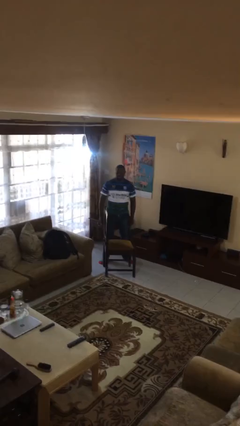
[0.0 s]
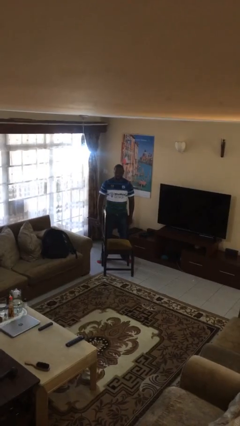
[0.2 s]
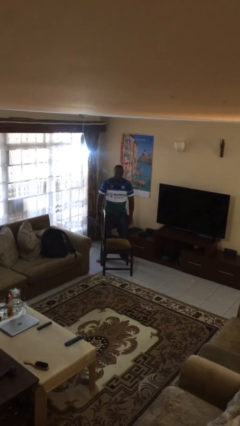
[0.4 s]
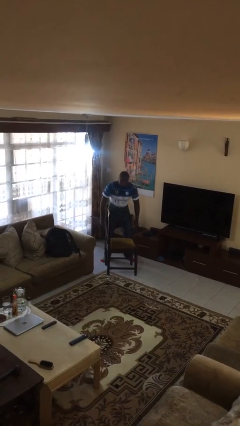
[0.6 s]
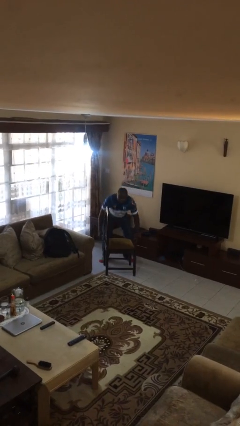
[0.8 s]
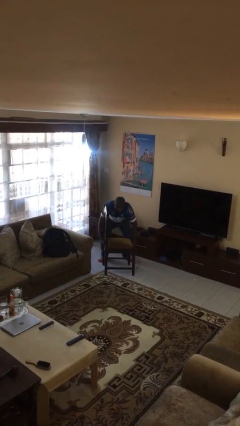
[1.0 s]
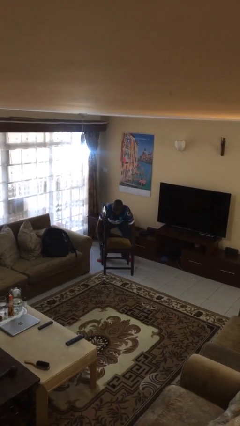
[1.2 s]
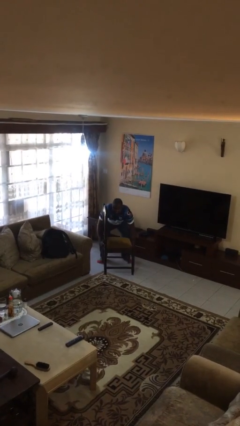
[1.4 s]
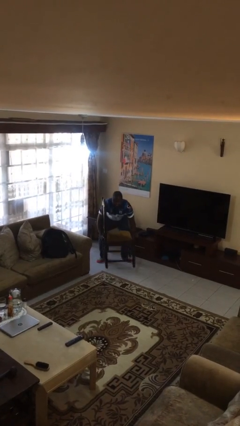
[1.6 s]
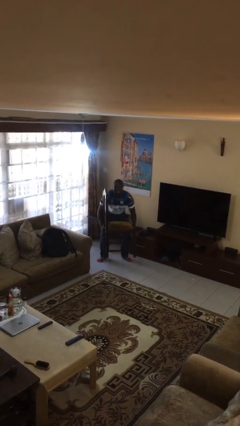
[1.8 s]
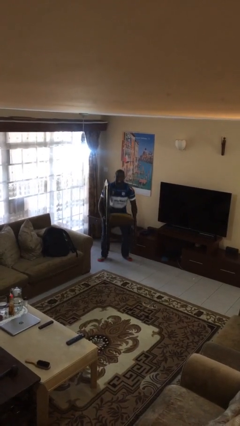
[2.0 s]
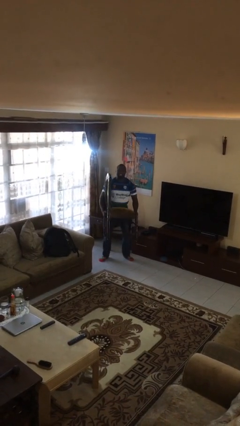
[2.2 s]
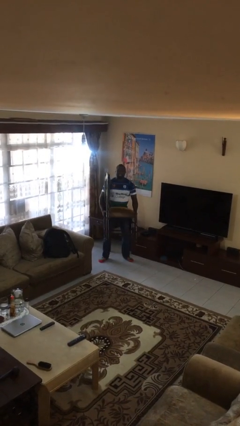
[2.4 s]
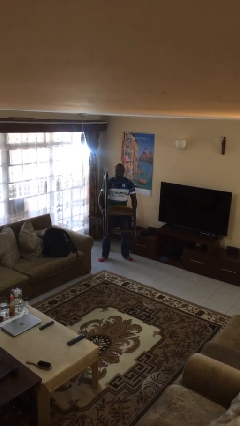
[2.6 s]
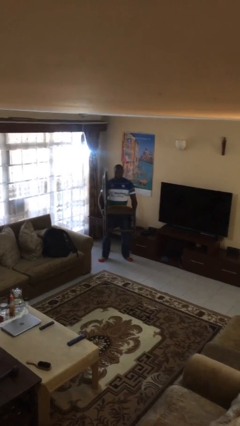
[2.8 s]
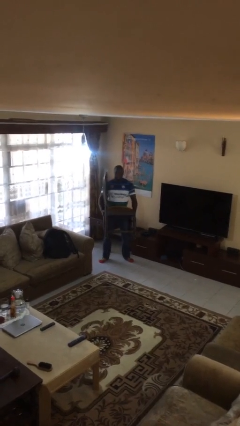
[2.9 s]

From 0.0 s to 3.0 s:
person picks up object from floor

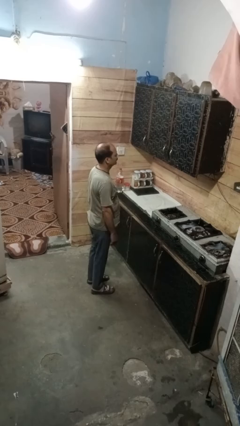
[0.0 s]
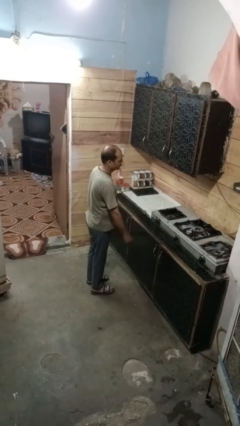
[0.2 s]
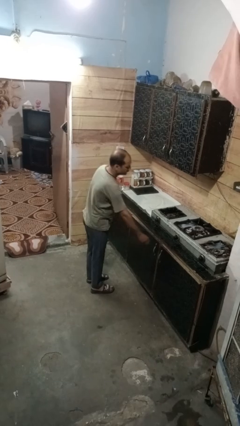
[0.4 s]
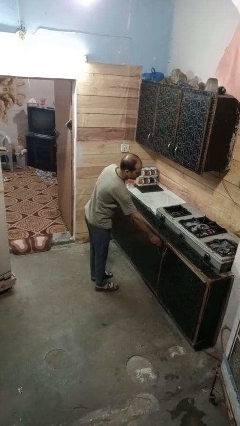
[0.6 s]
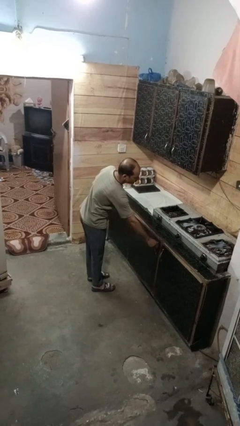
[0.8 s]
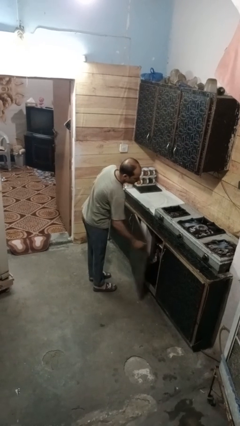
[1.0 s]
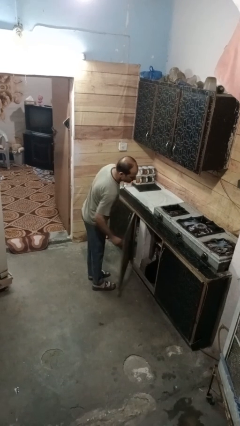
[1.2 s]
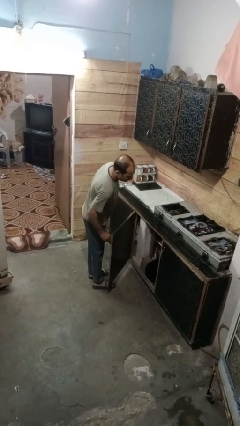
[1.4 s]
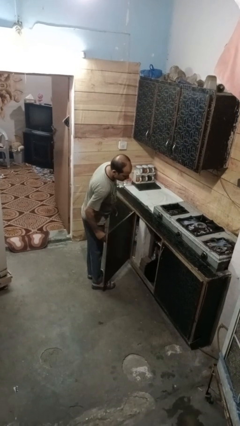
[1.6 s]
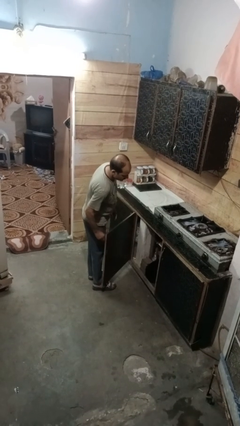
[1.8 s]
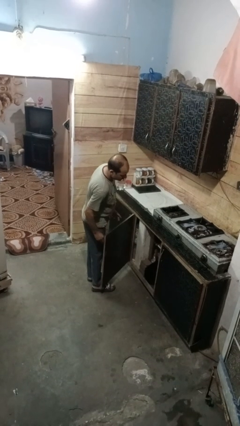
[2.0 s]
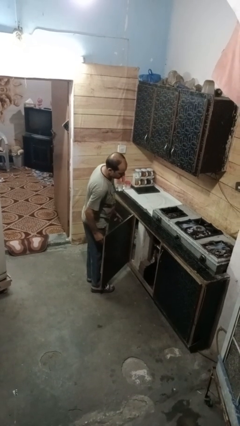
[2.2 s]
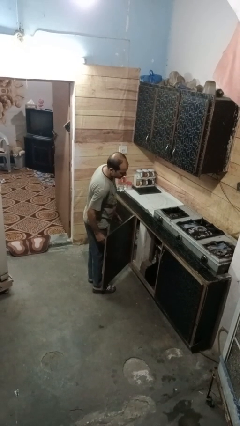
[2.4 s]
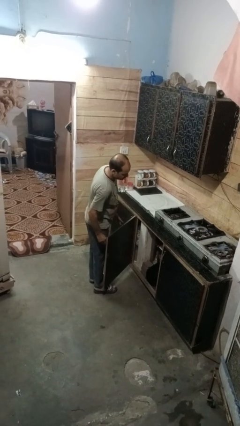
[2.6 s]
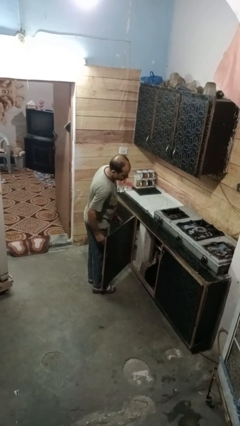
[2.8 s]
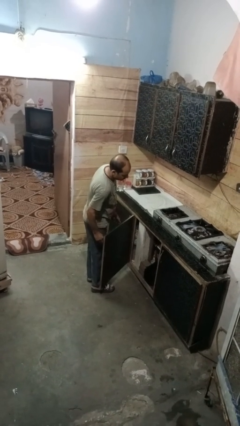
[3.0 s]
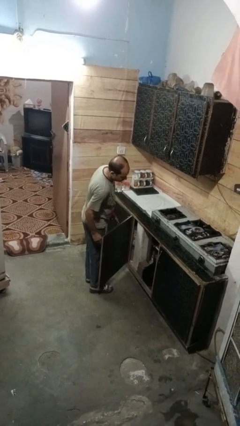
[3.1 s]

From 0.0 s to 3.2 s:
person opens cabinet

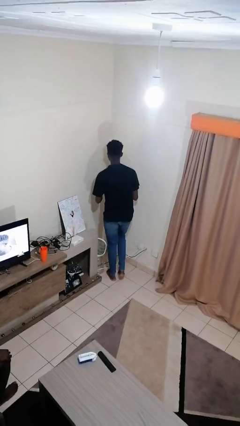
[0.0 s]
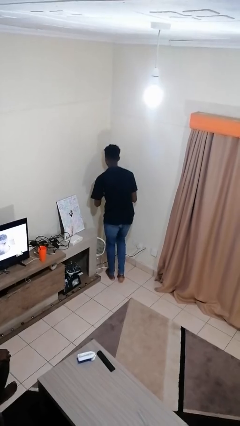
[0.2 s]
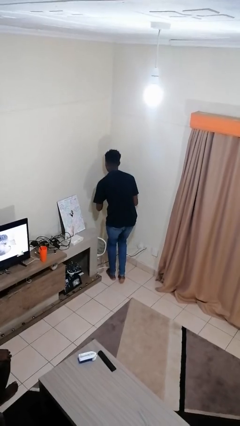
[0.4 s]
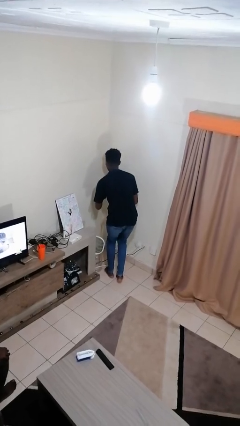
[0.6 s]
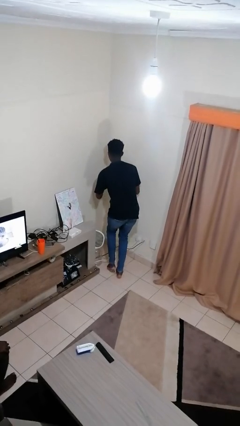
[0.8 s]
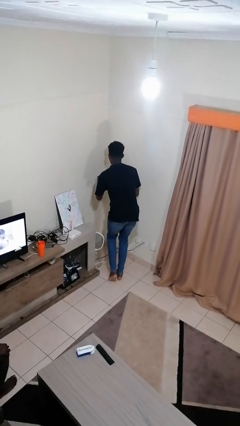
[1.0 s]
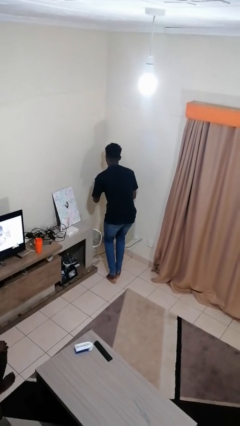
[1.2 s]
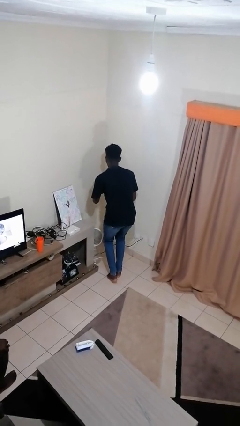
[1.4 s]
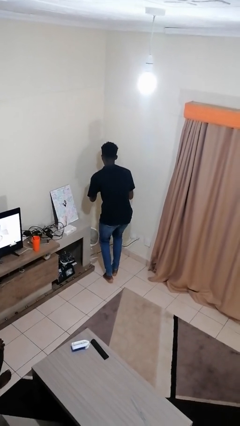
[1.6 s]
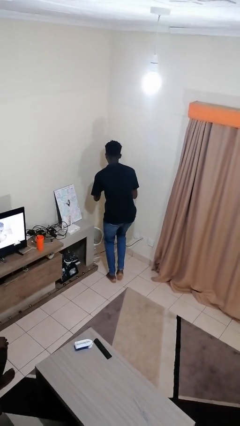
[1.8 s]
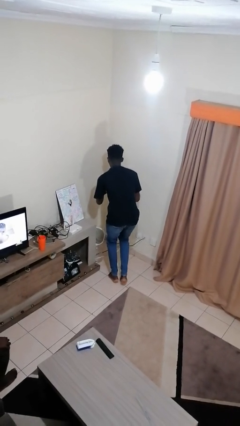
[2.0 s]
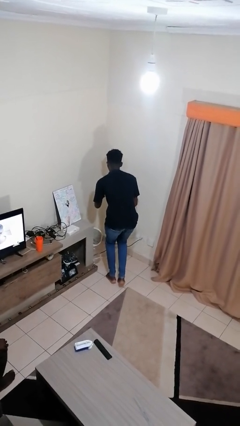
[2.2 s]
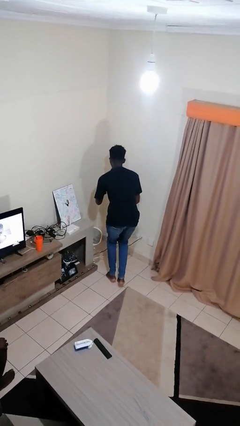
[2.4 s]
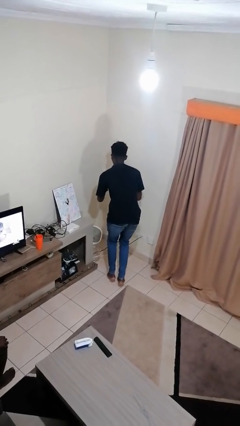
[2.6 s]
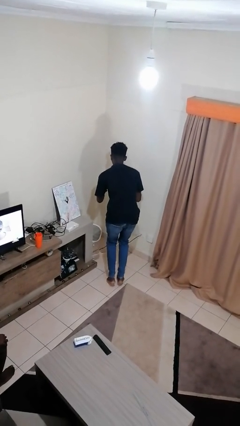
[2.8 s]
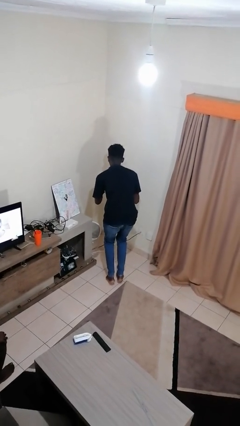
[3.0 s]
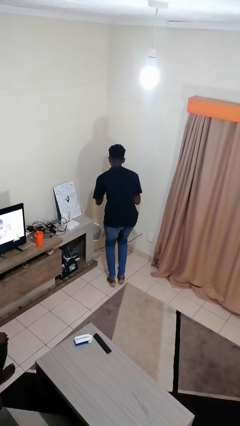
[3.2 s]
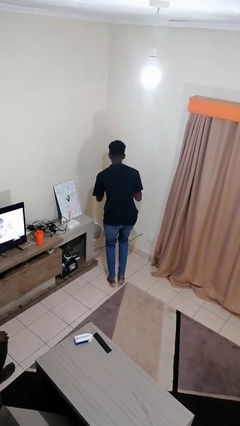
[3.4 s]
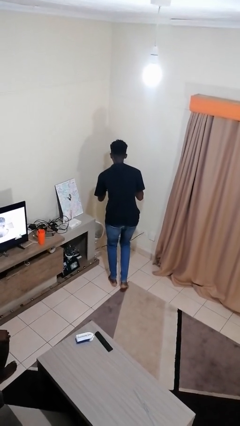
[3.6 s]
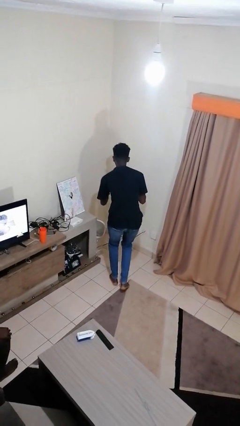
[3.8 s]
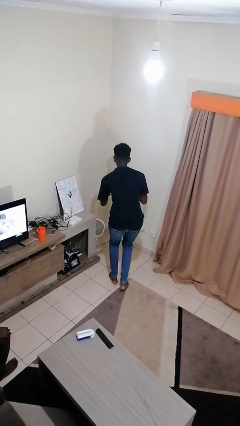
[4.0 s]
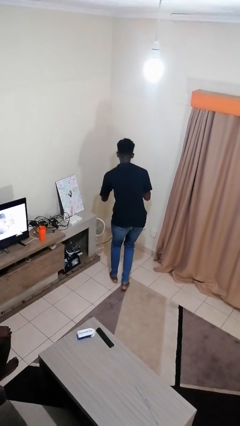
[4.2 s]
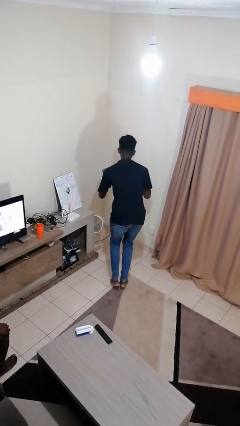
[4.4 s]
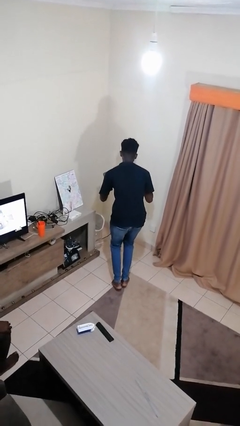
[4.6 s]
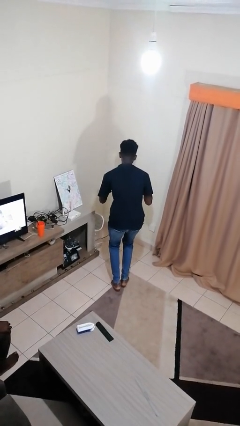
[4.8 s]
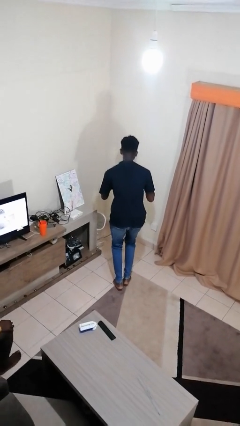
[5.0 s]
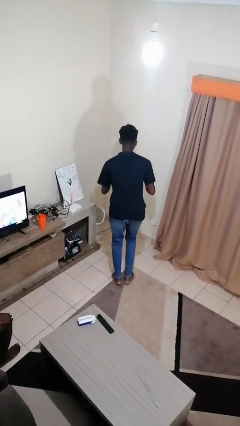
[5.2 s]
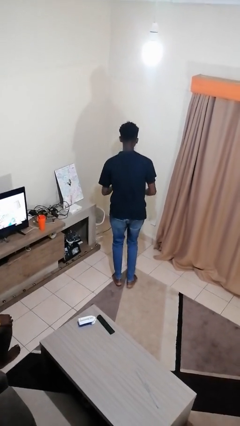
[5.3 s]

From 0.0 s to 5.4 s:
person walks tiptoe

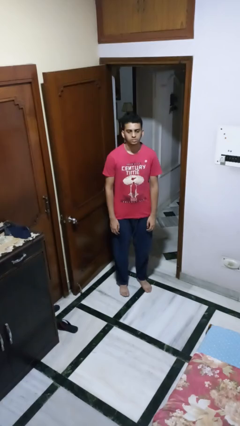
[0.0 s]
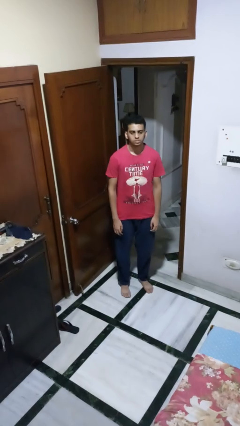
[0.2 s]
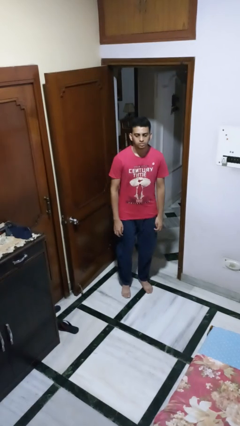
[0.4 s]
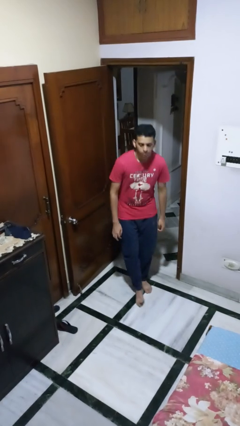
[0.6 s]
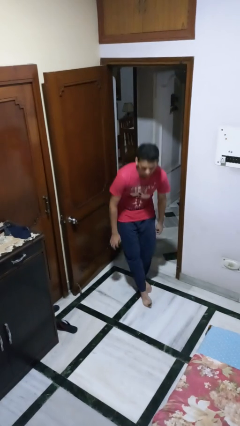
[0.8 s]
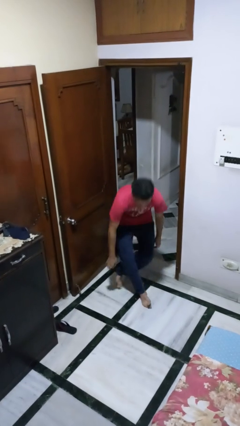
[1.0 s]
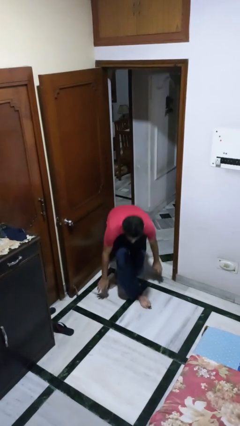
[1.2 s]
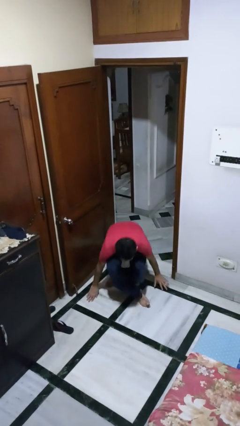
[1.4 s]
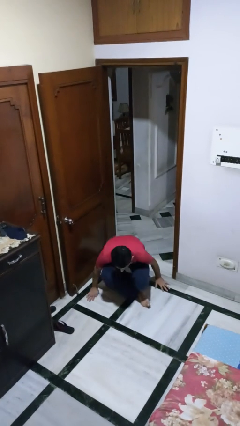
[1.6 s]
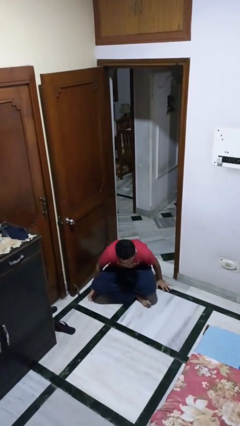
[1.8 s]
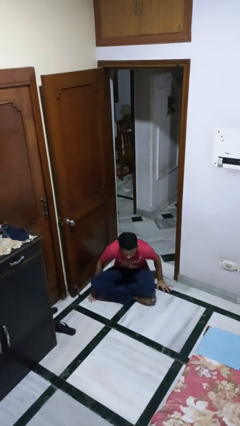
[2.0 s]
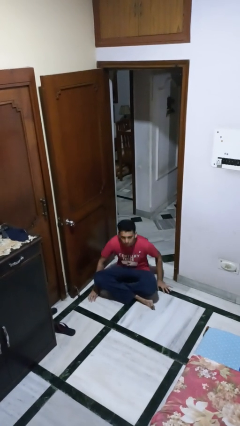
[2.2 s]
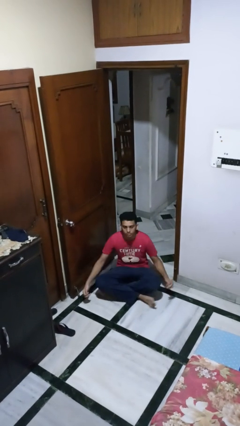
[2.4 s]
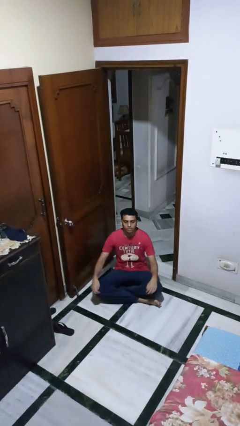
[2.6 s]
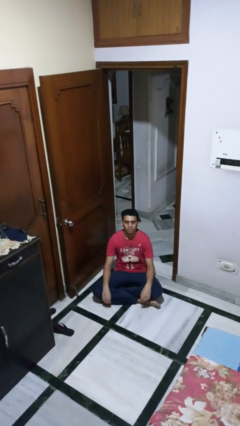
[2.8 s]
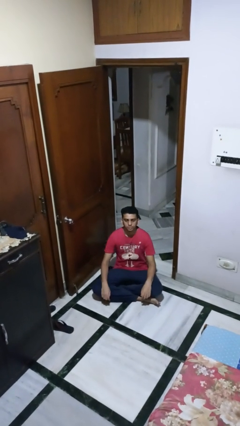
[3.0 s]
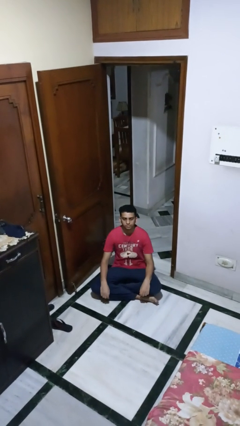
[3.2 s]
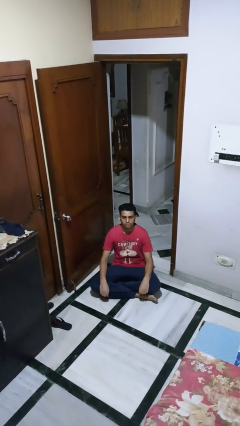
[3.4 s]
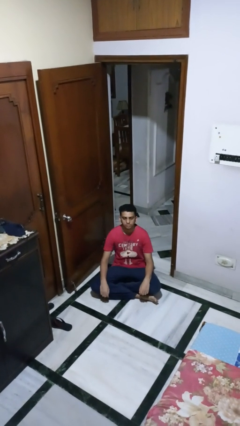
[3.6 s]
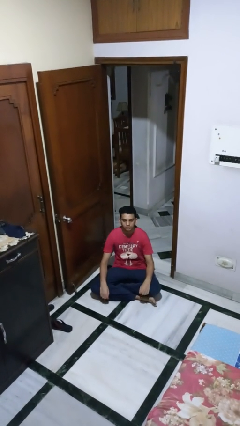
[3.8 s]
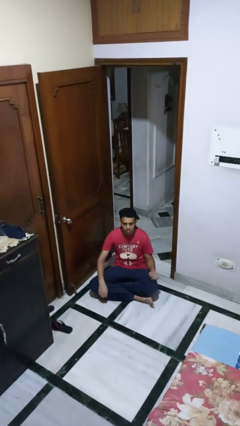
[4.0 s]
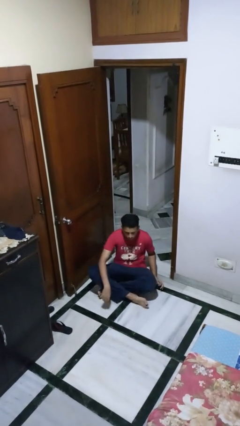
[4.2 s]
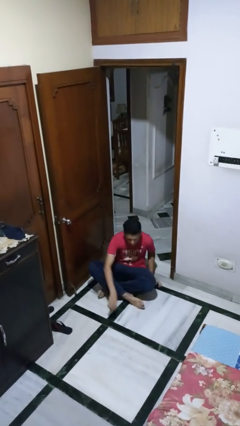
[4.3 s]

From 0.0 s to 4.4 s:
person sits crisscross

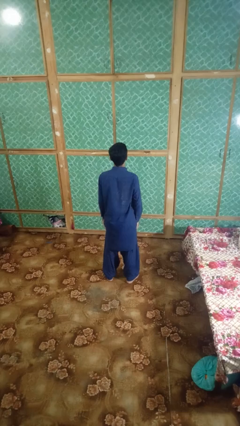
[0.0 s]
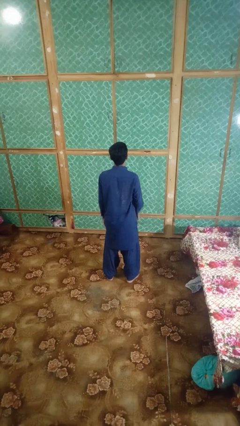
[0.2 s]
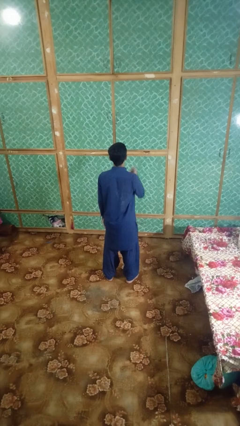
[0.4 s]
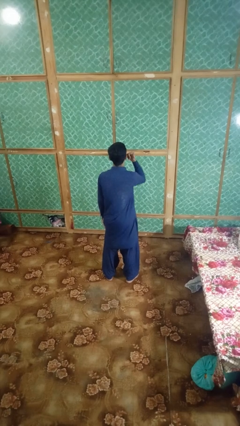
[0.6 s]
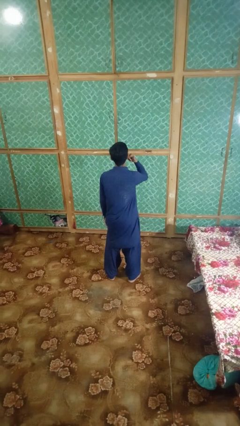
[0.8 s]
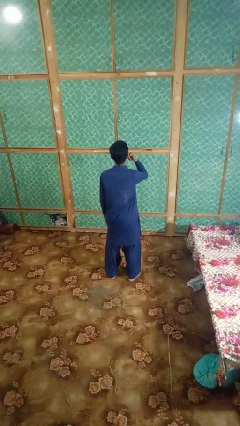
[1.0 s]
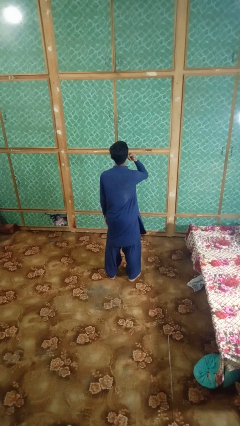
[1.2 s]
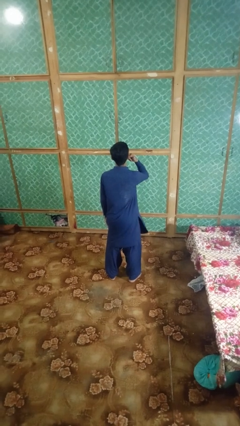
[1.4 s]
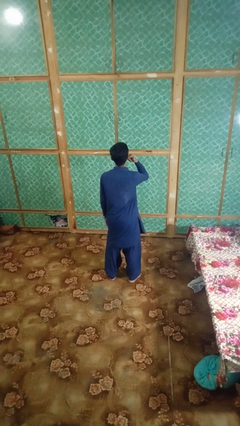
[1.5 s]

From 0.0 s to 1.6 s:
person gestures call me
